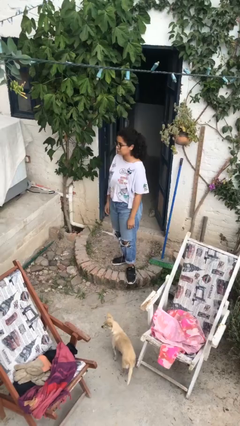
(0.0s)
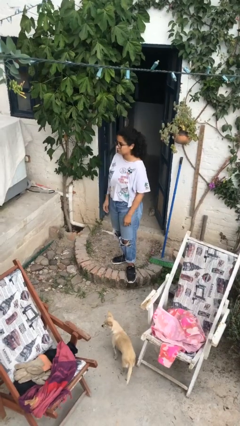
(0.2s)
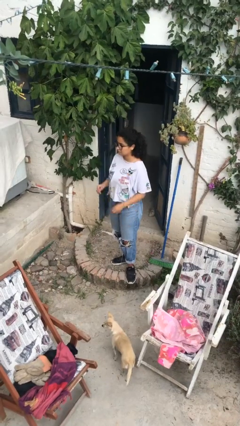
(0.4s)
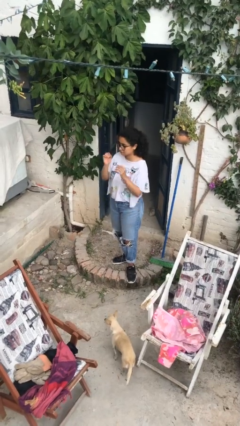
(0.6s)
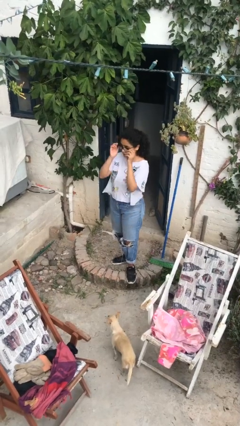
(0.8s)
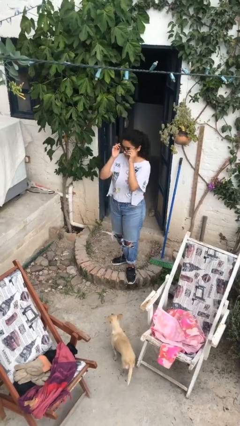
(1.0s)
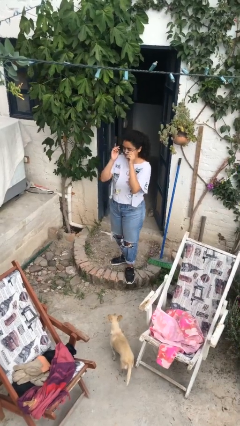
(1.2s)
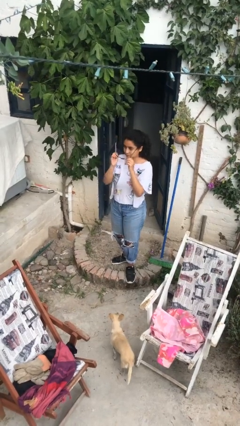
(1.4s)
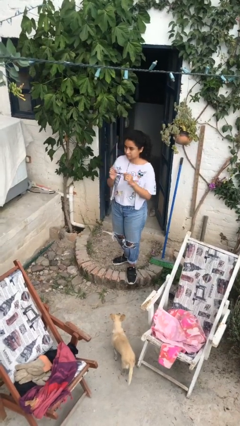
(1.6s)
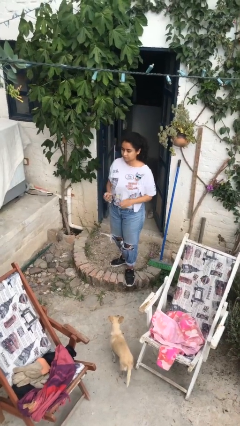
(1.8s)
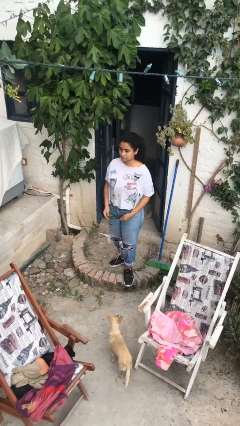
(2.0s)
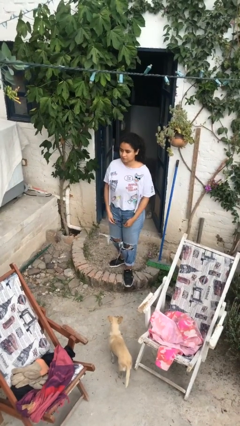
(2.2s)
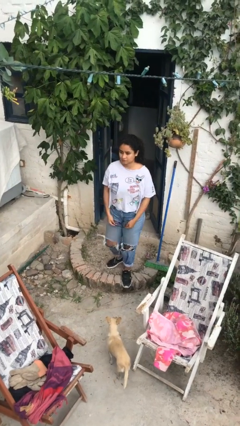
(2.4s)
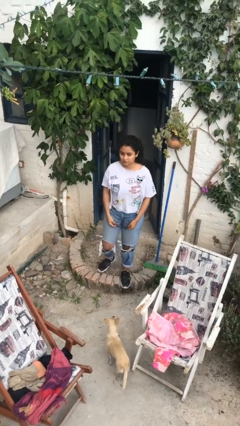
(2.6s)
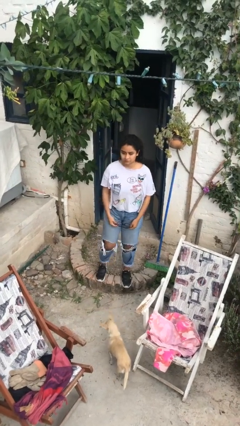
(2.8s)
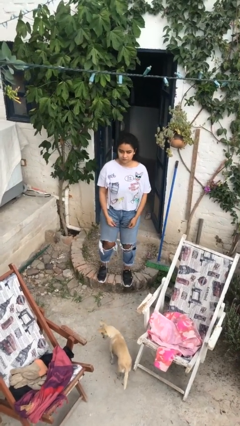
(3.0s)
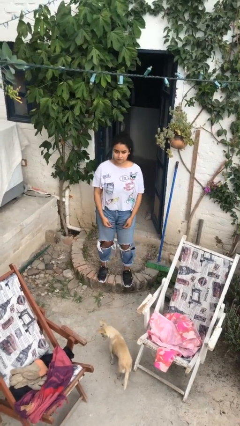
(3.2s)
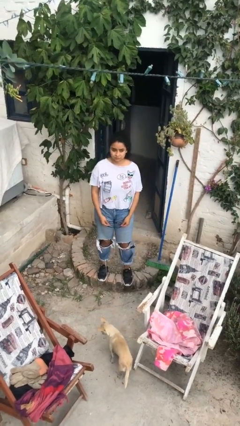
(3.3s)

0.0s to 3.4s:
person takes off glasses

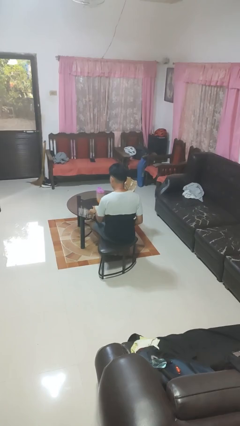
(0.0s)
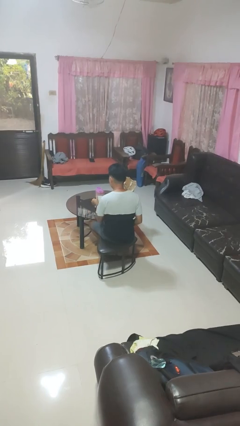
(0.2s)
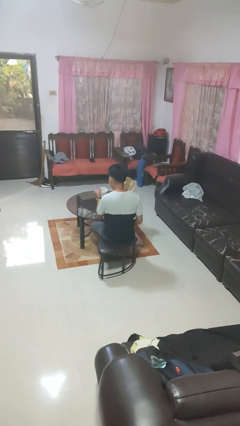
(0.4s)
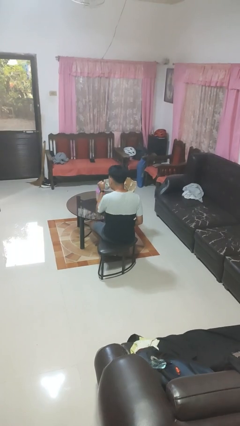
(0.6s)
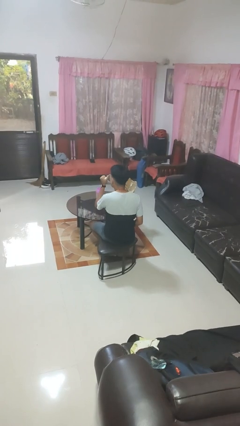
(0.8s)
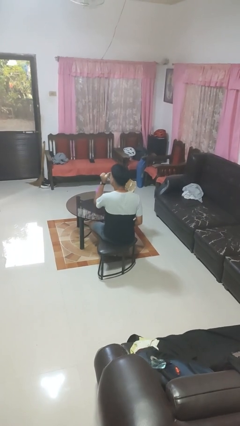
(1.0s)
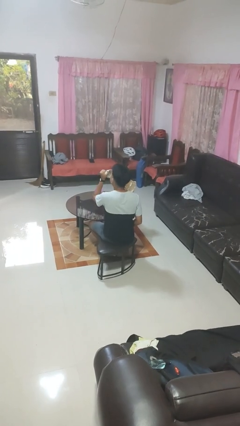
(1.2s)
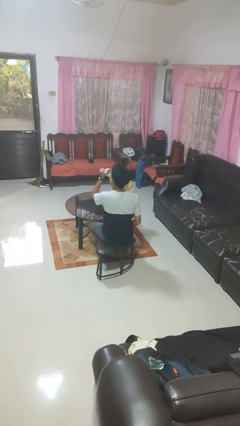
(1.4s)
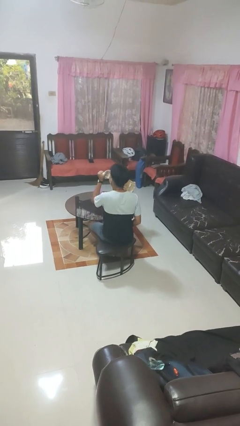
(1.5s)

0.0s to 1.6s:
person drinks from mug

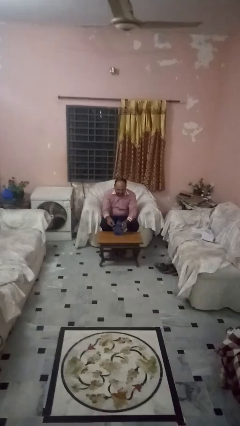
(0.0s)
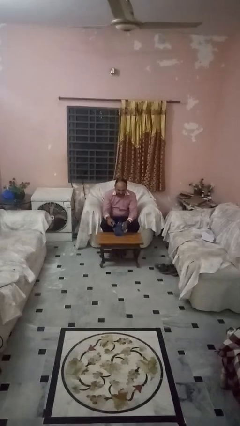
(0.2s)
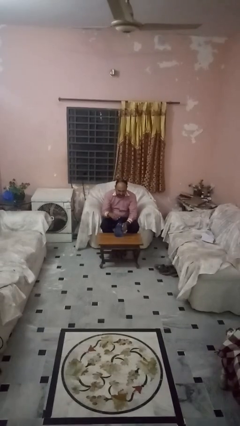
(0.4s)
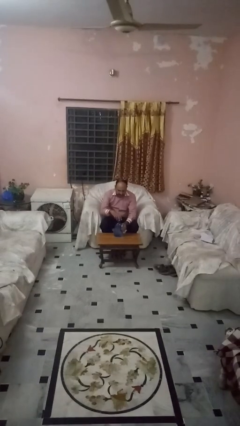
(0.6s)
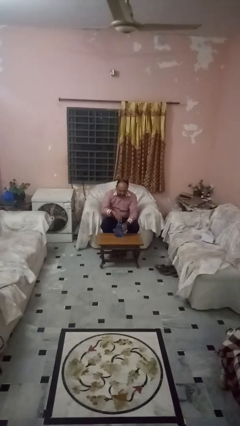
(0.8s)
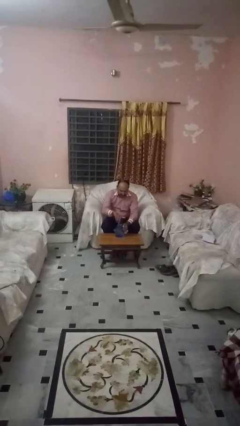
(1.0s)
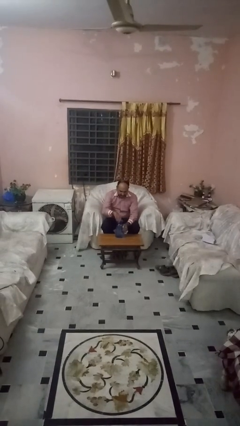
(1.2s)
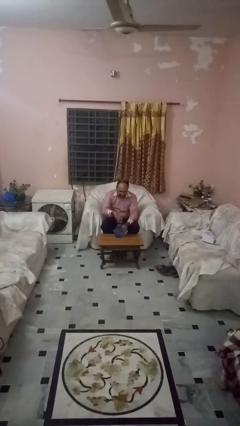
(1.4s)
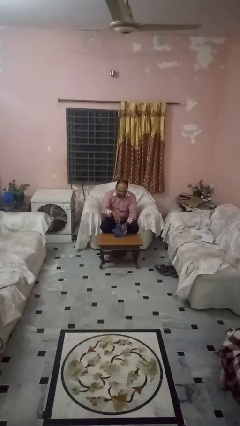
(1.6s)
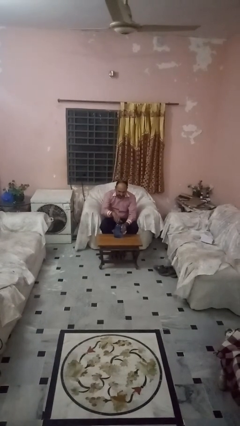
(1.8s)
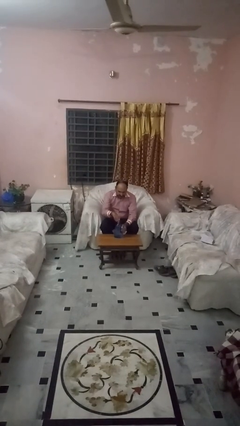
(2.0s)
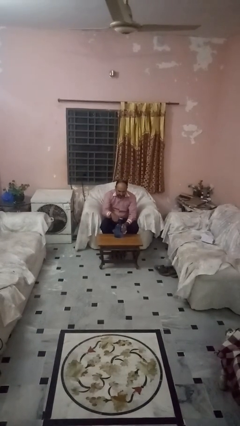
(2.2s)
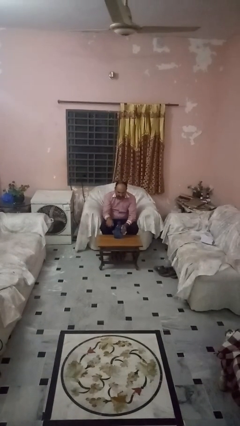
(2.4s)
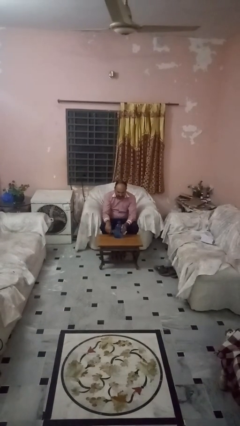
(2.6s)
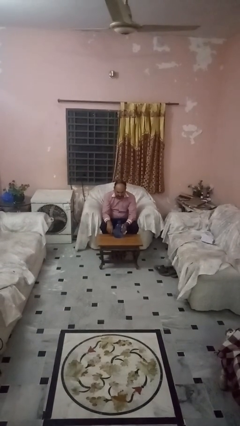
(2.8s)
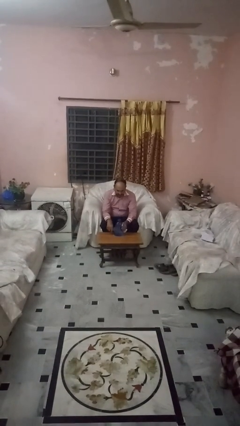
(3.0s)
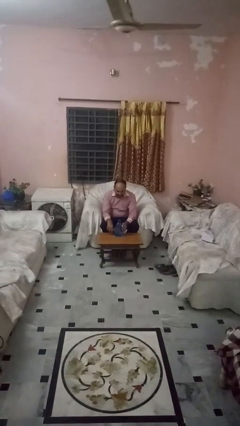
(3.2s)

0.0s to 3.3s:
person screws lid to bottle

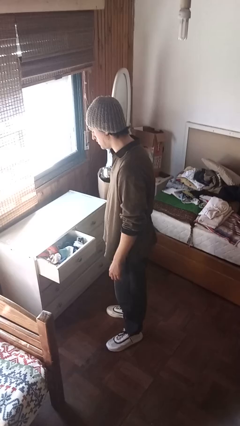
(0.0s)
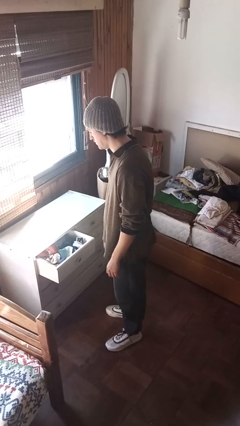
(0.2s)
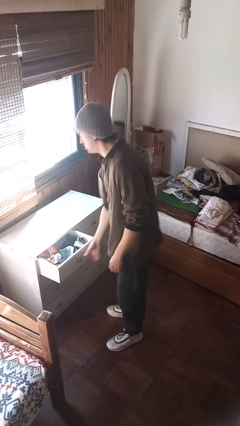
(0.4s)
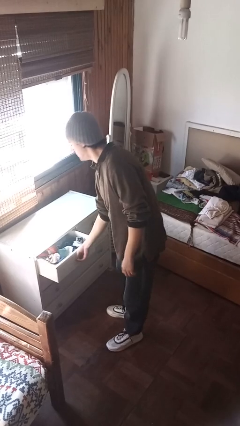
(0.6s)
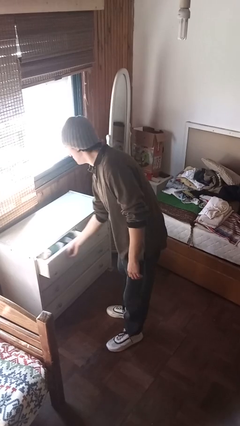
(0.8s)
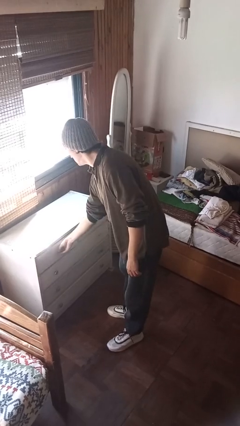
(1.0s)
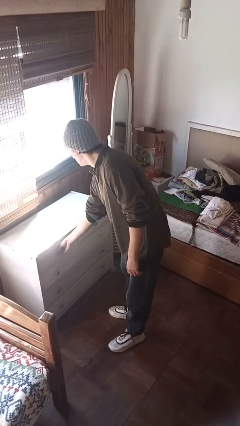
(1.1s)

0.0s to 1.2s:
person closes dresser drawer

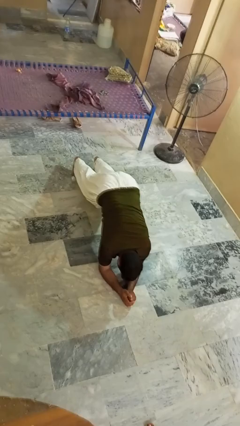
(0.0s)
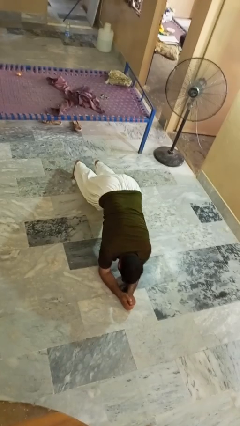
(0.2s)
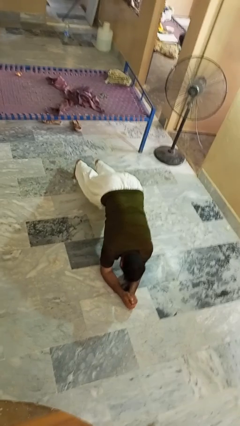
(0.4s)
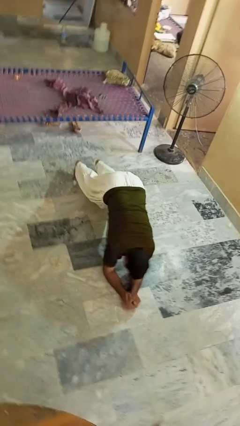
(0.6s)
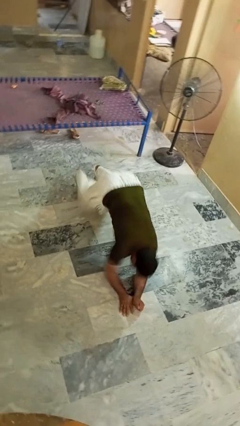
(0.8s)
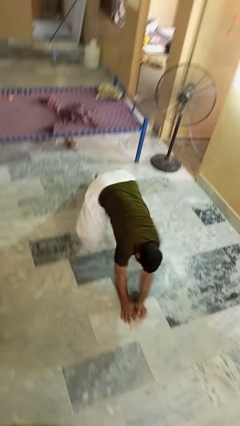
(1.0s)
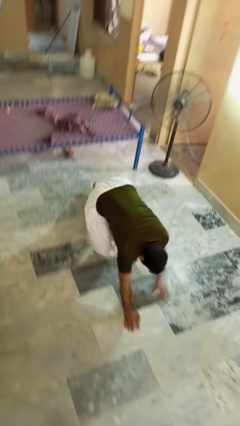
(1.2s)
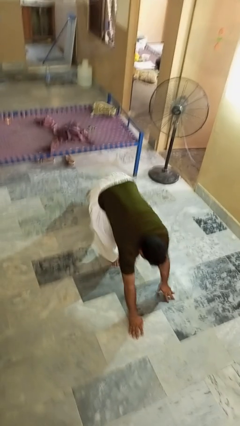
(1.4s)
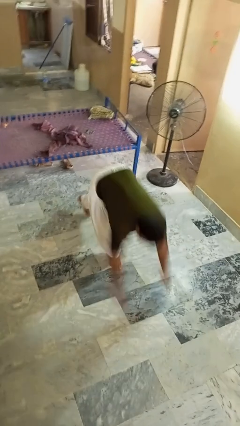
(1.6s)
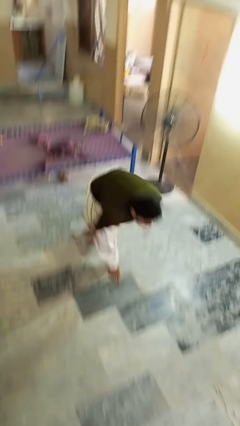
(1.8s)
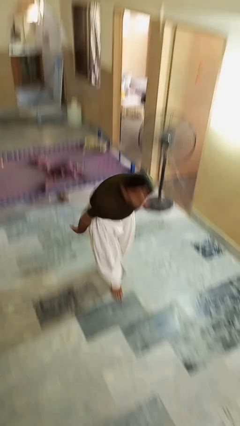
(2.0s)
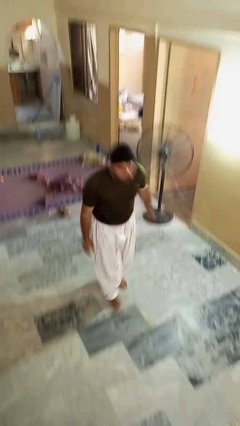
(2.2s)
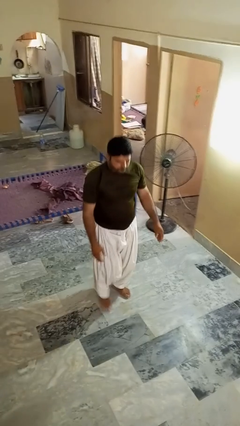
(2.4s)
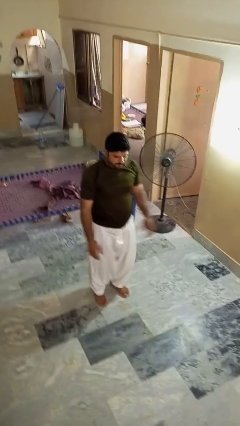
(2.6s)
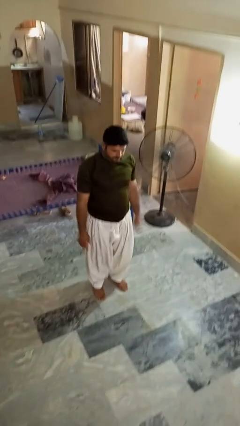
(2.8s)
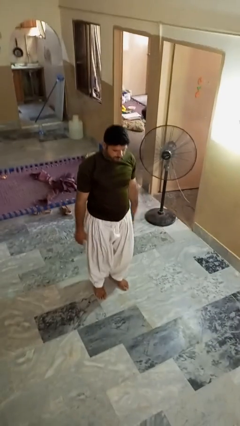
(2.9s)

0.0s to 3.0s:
person stands up from floor

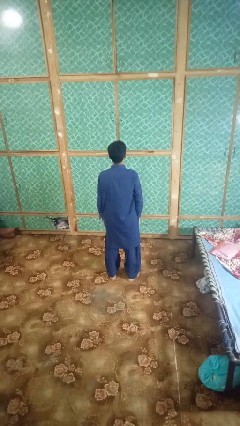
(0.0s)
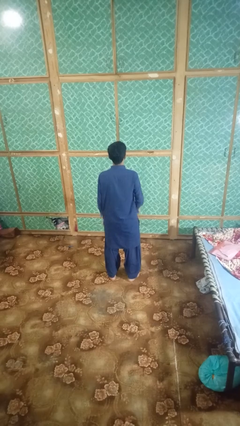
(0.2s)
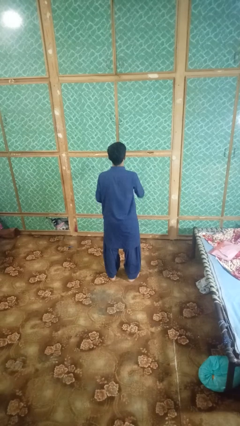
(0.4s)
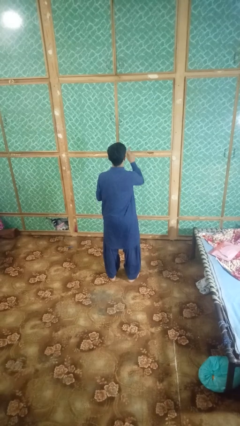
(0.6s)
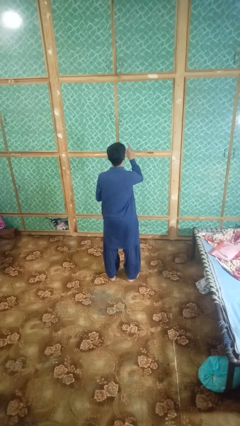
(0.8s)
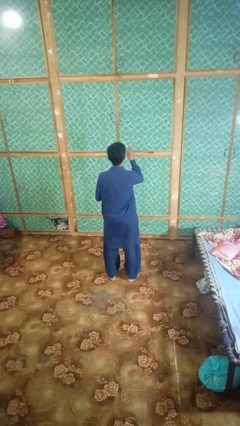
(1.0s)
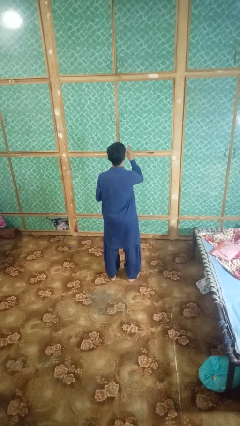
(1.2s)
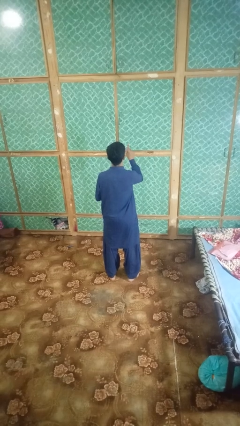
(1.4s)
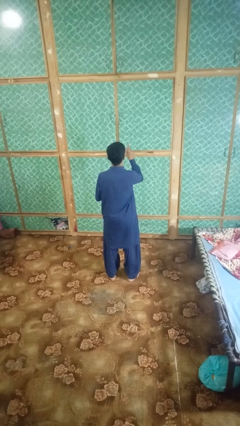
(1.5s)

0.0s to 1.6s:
person gestures number one

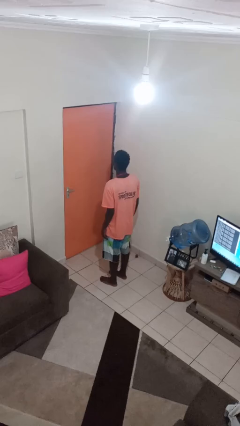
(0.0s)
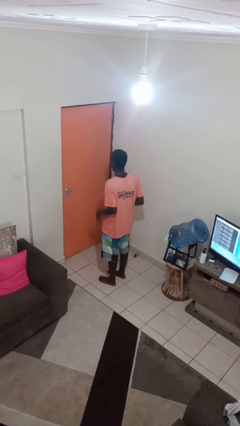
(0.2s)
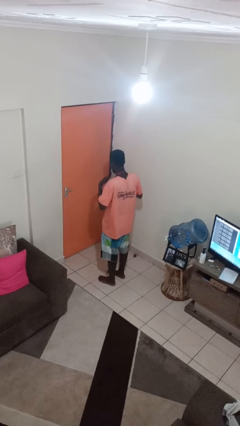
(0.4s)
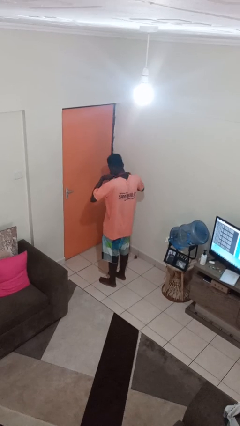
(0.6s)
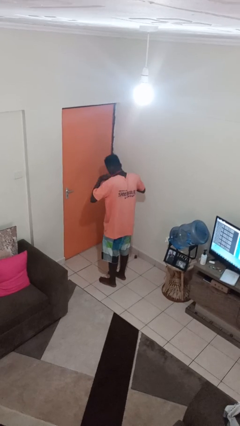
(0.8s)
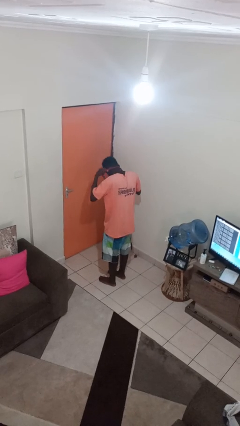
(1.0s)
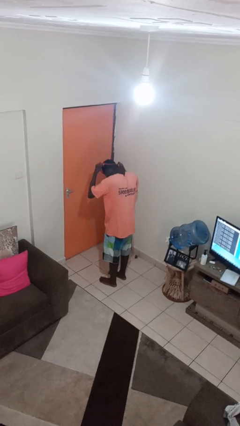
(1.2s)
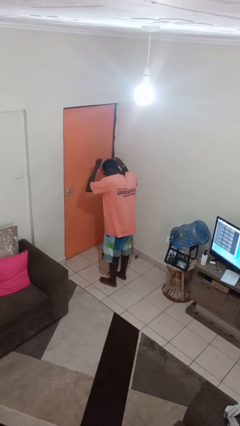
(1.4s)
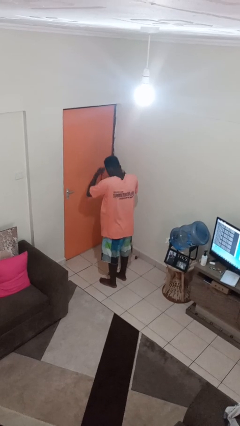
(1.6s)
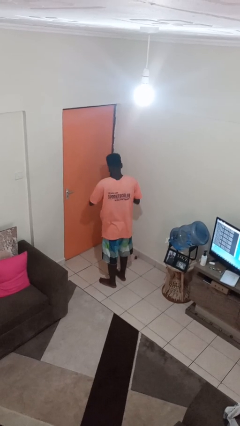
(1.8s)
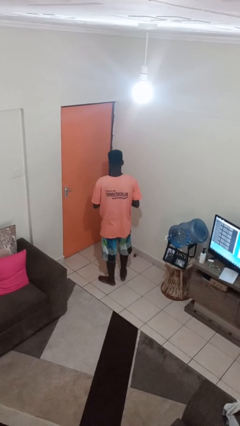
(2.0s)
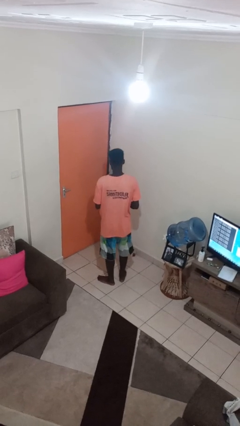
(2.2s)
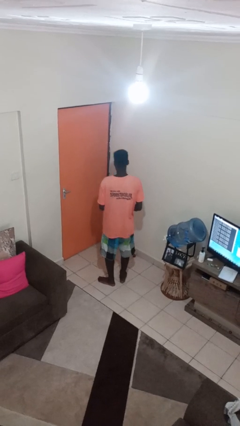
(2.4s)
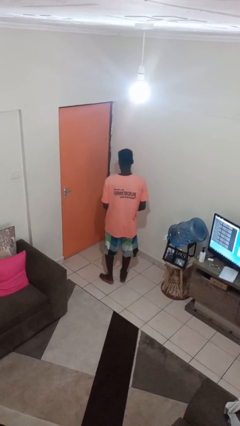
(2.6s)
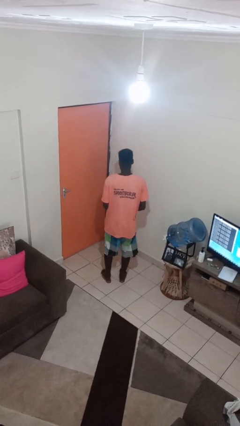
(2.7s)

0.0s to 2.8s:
person takes off necklace

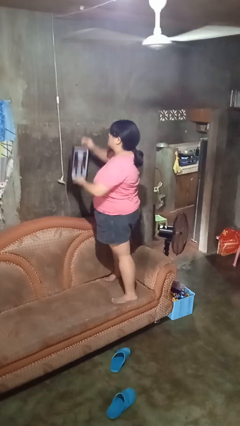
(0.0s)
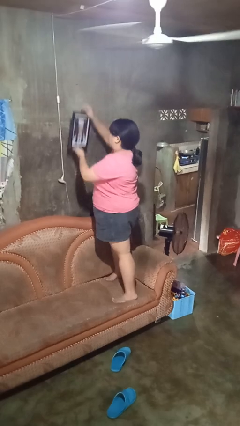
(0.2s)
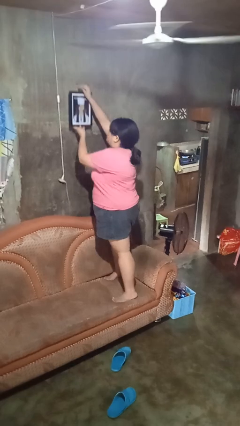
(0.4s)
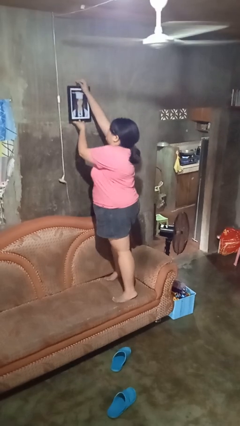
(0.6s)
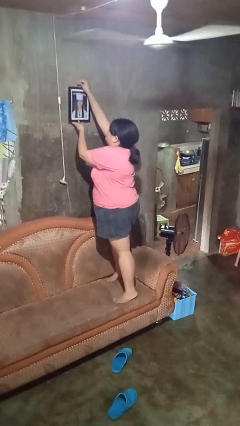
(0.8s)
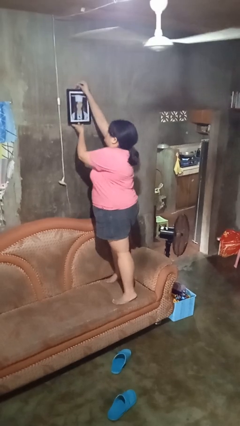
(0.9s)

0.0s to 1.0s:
person puts up picture frame
